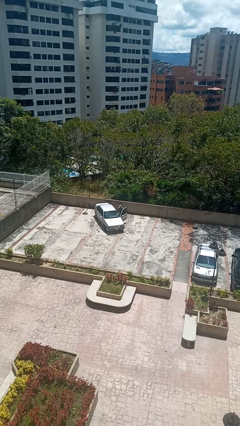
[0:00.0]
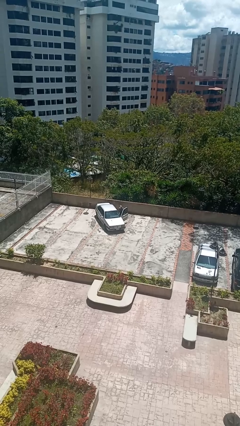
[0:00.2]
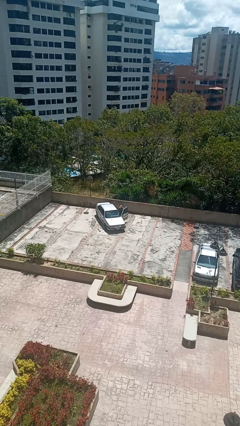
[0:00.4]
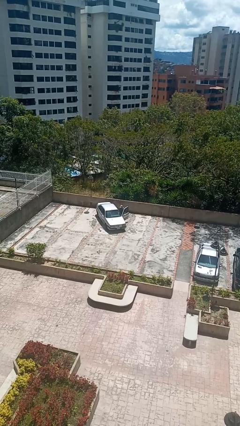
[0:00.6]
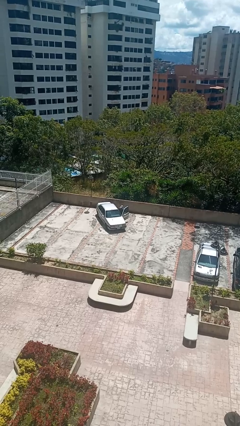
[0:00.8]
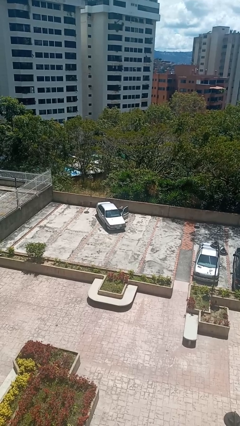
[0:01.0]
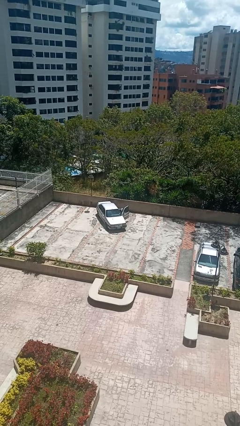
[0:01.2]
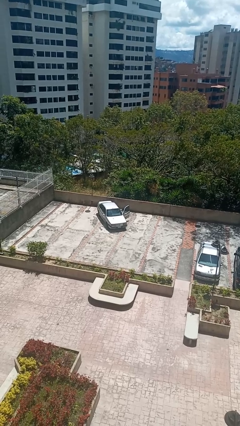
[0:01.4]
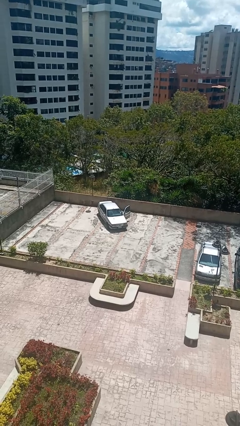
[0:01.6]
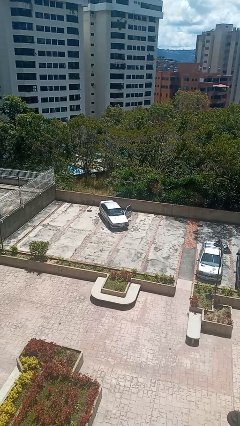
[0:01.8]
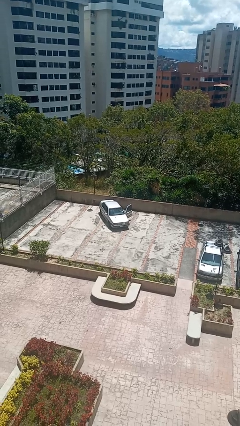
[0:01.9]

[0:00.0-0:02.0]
person enters car

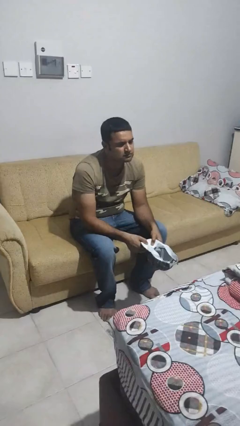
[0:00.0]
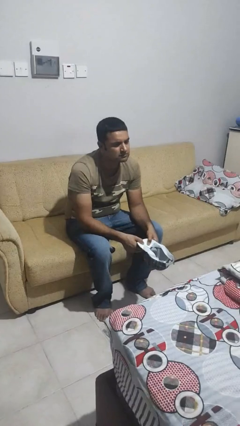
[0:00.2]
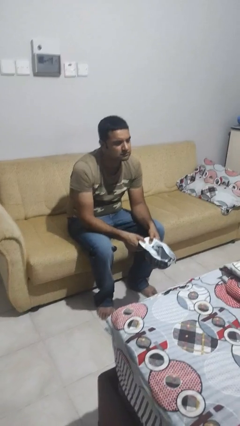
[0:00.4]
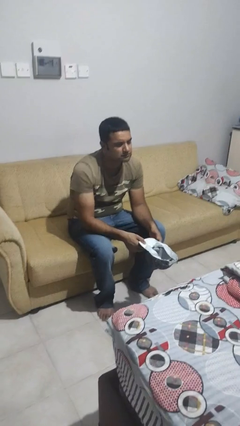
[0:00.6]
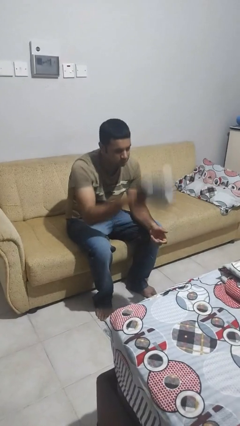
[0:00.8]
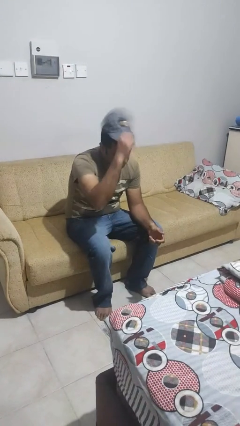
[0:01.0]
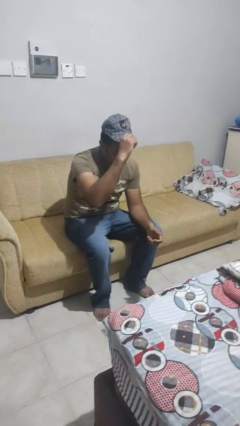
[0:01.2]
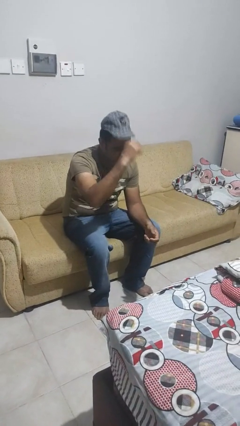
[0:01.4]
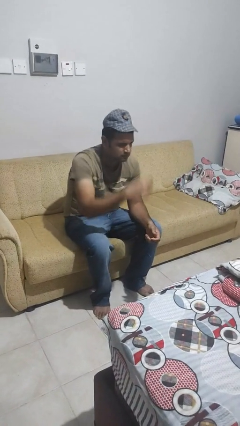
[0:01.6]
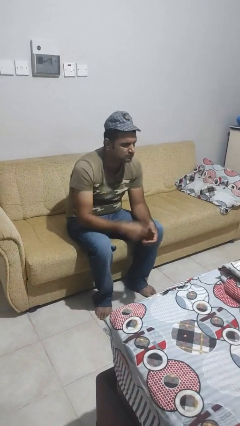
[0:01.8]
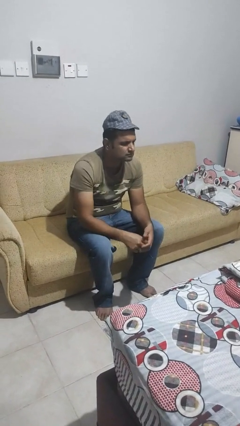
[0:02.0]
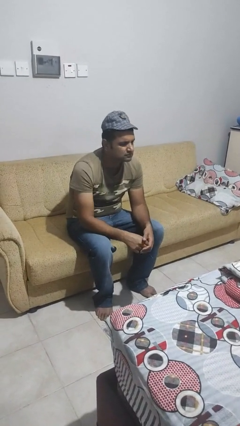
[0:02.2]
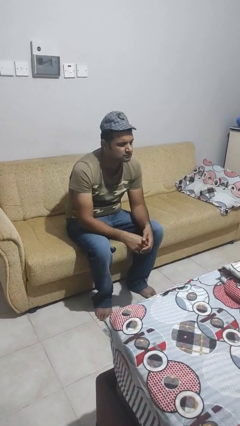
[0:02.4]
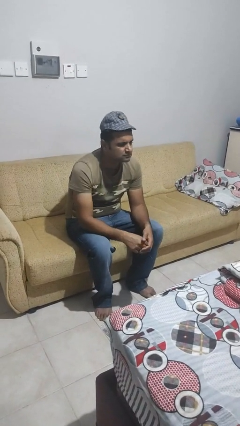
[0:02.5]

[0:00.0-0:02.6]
person puts on hat

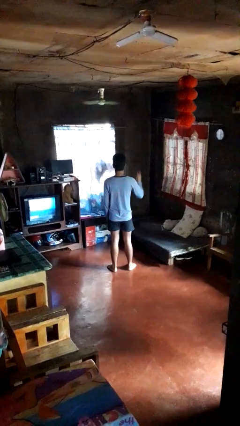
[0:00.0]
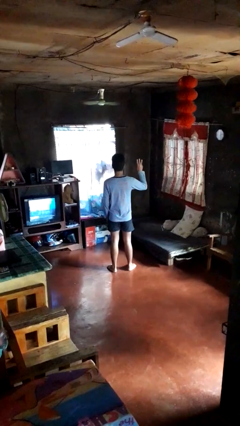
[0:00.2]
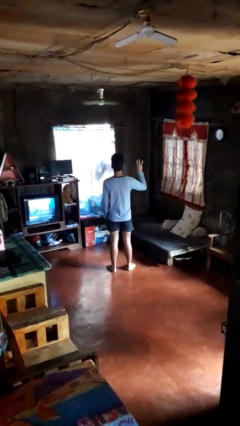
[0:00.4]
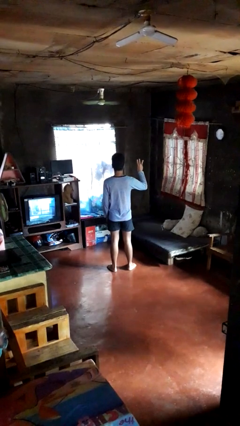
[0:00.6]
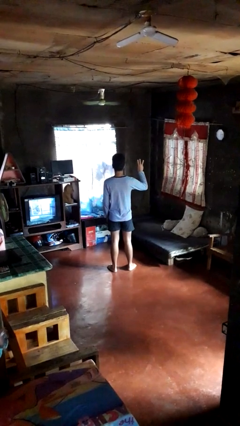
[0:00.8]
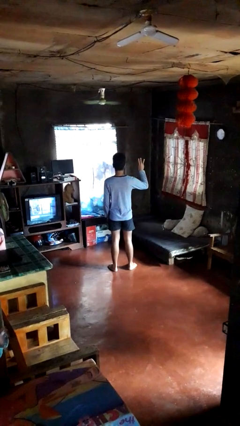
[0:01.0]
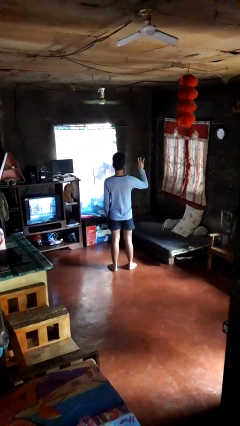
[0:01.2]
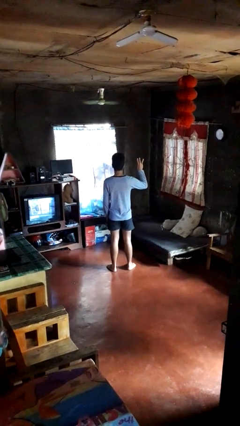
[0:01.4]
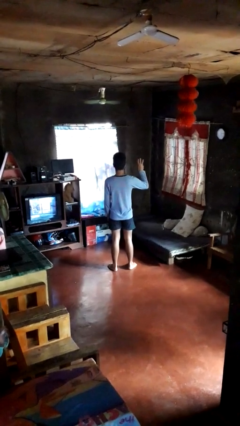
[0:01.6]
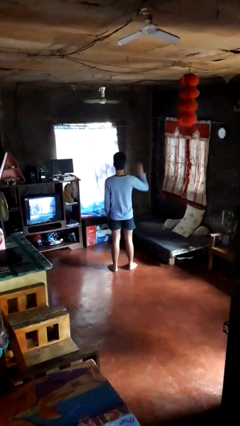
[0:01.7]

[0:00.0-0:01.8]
person gestures number three

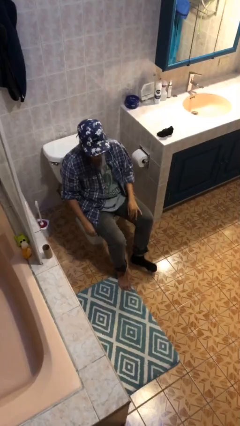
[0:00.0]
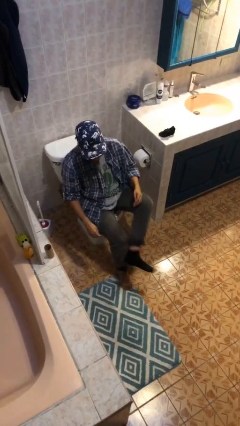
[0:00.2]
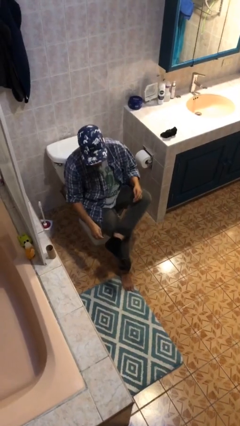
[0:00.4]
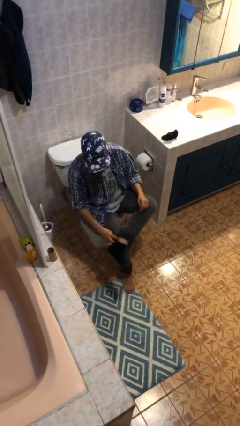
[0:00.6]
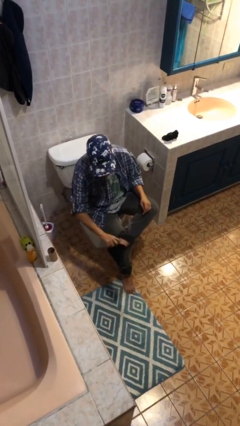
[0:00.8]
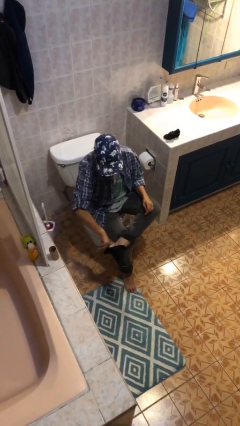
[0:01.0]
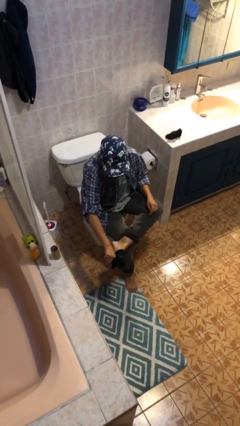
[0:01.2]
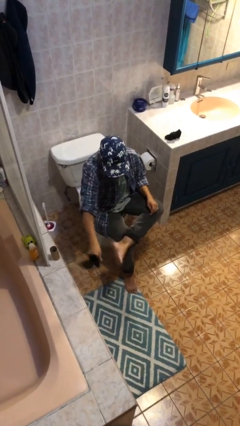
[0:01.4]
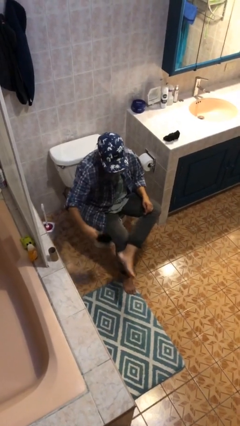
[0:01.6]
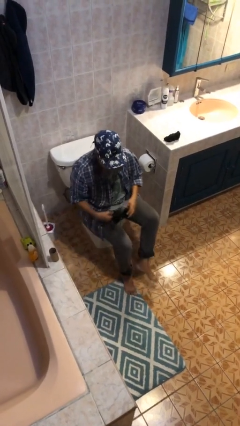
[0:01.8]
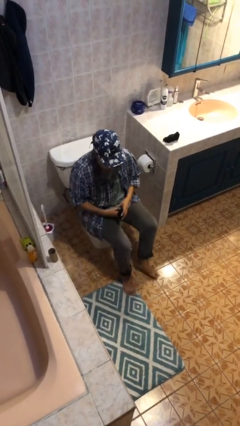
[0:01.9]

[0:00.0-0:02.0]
person takes off socks

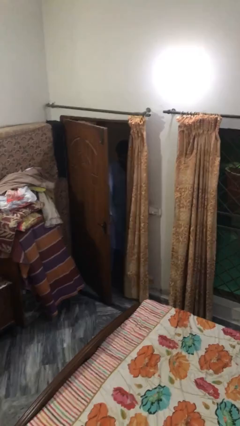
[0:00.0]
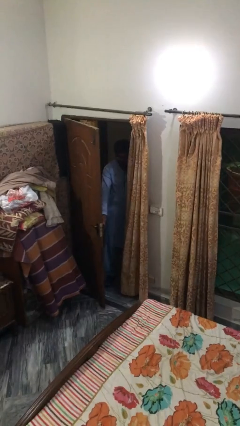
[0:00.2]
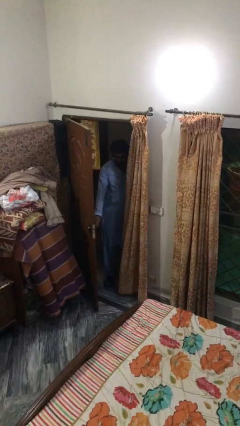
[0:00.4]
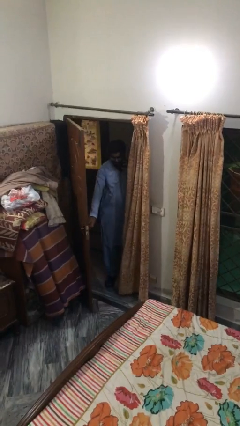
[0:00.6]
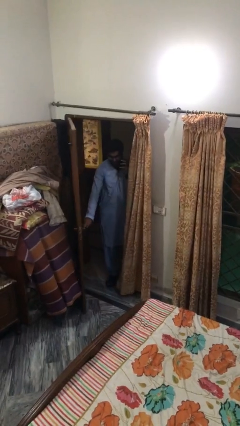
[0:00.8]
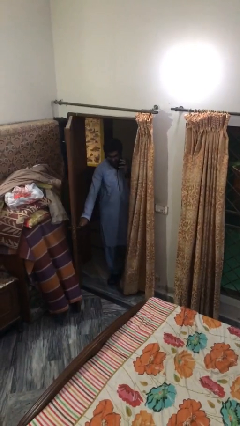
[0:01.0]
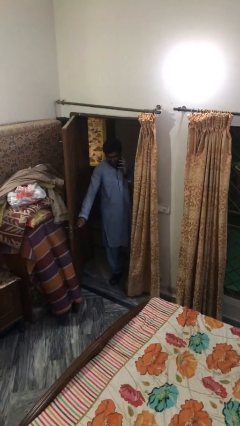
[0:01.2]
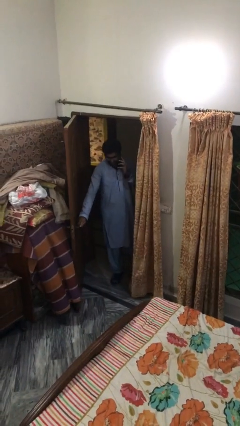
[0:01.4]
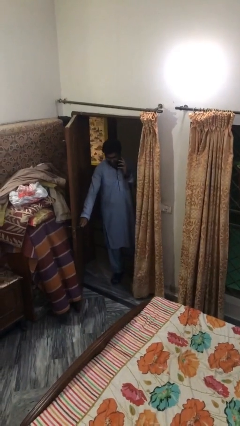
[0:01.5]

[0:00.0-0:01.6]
person opens facility door

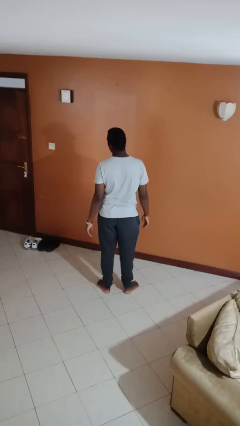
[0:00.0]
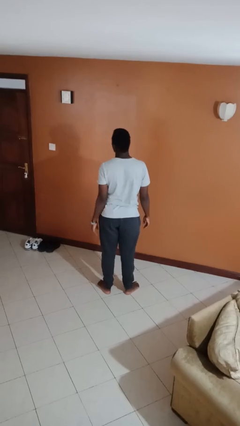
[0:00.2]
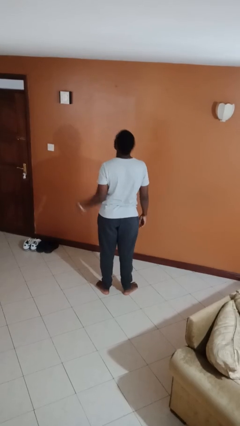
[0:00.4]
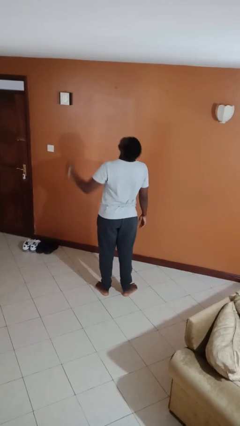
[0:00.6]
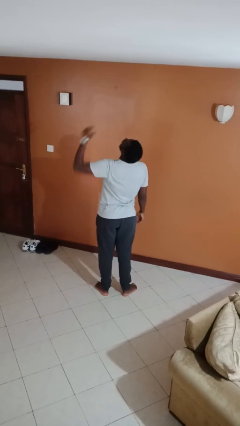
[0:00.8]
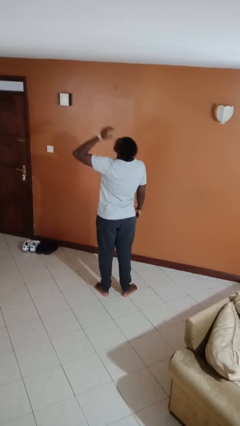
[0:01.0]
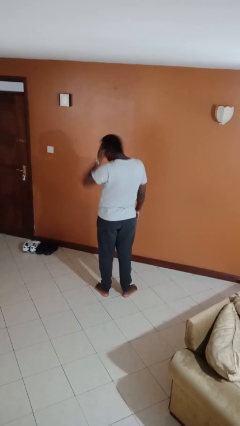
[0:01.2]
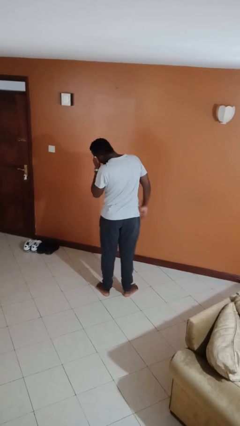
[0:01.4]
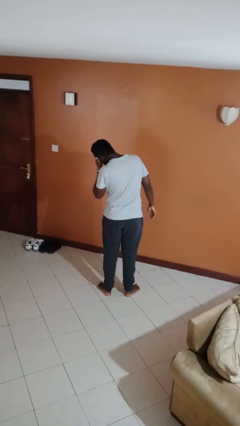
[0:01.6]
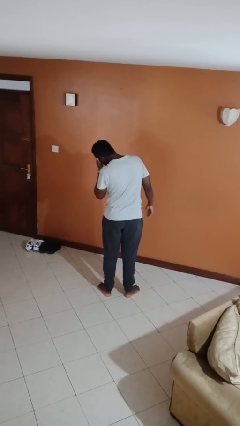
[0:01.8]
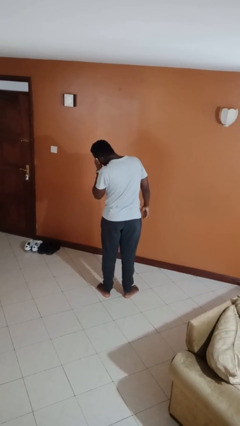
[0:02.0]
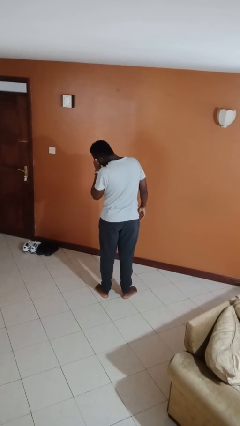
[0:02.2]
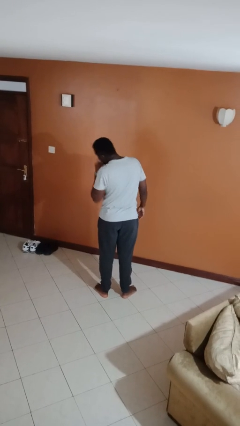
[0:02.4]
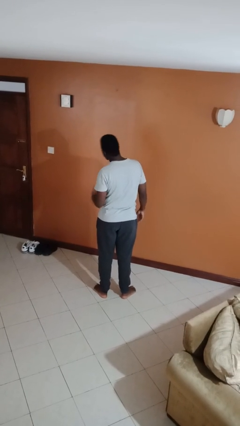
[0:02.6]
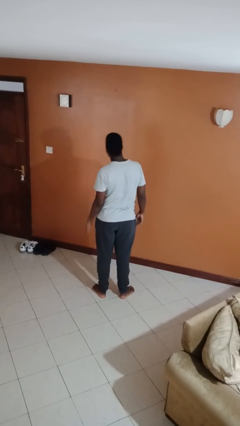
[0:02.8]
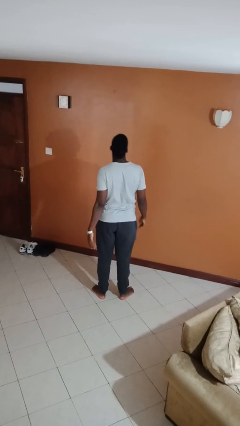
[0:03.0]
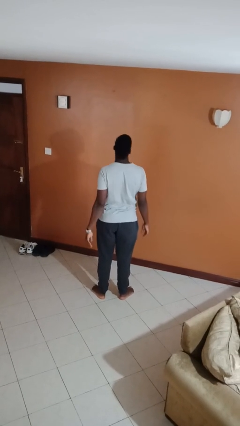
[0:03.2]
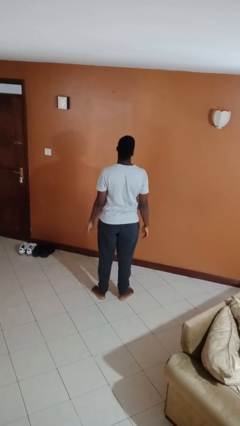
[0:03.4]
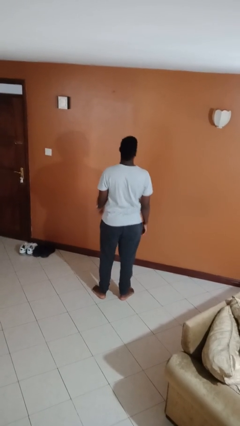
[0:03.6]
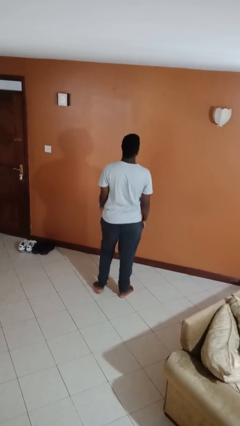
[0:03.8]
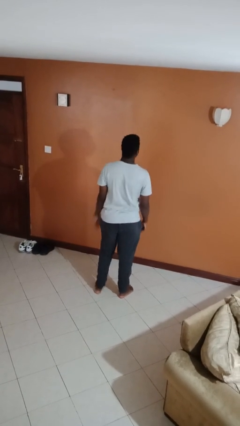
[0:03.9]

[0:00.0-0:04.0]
person sneezes into hand

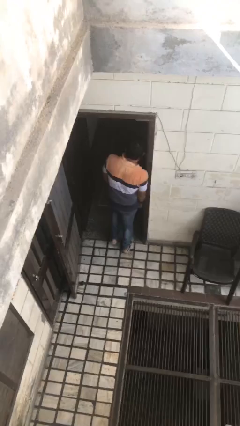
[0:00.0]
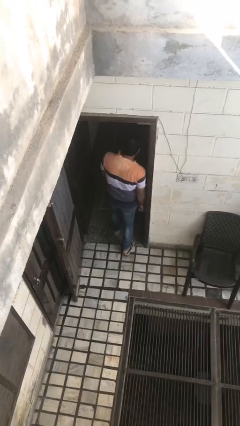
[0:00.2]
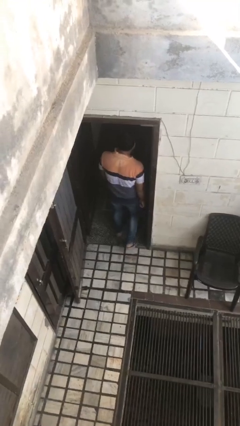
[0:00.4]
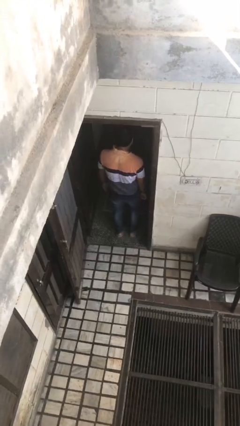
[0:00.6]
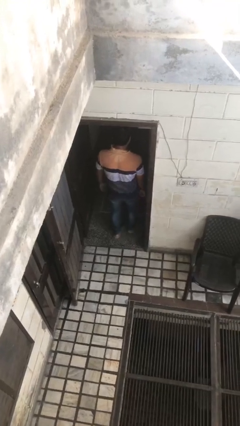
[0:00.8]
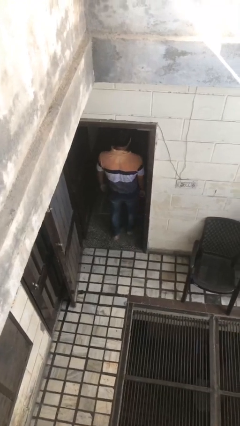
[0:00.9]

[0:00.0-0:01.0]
person bumps into wall

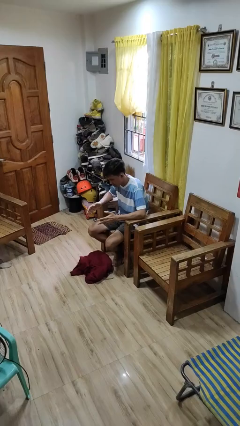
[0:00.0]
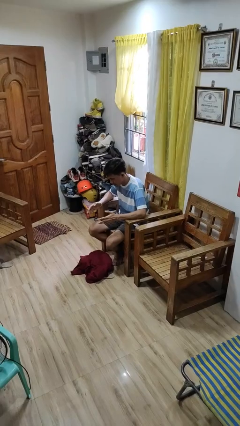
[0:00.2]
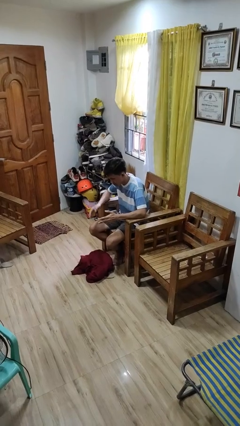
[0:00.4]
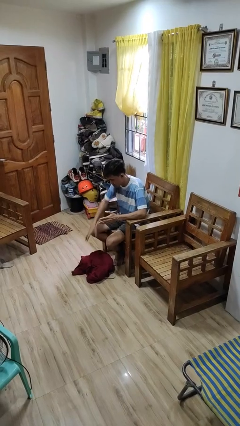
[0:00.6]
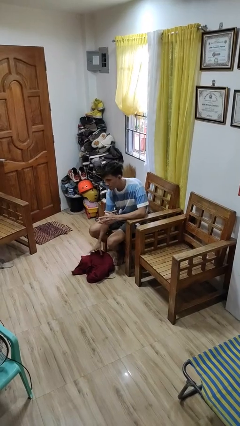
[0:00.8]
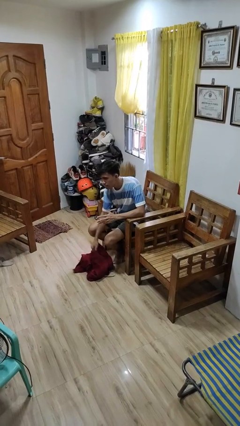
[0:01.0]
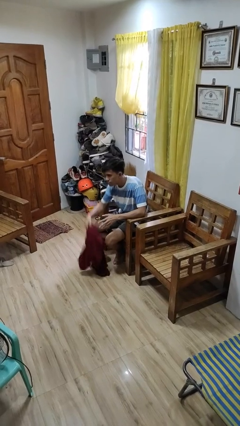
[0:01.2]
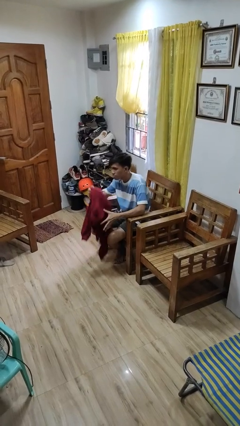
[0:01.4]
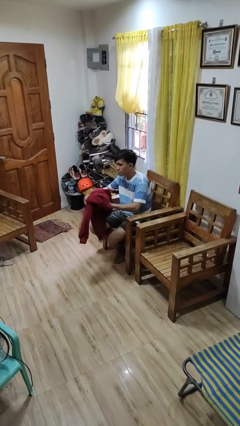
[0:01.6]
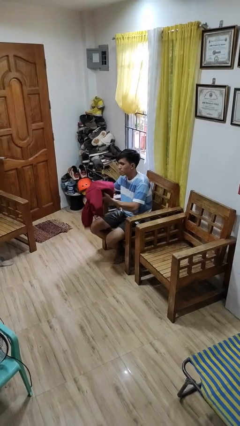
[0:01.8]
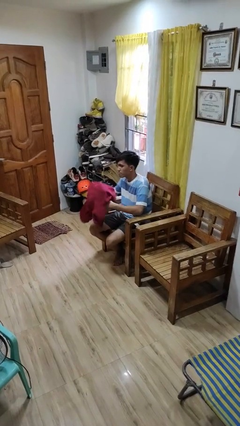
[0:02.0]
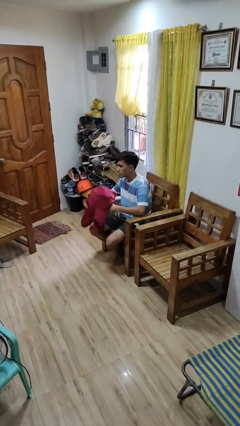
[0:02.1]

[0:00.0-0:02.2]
person picks up object from floor
